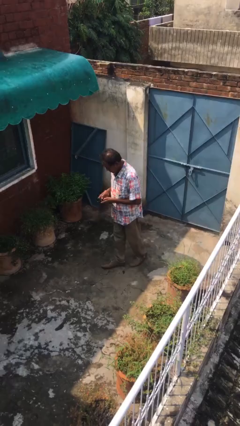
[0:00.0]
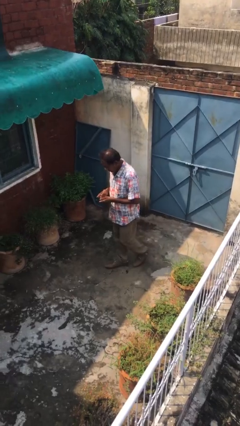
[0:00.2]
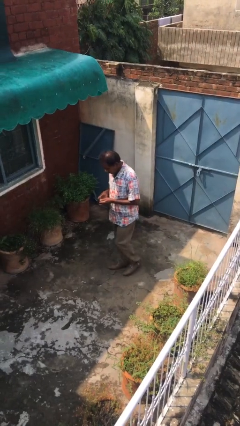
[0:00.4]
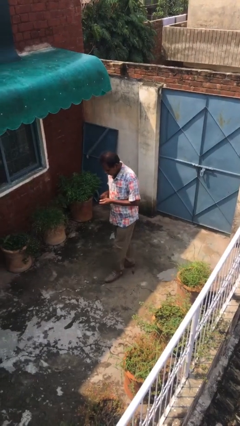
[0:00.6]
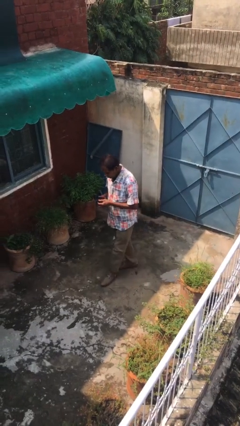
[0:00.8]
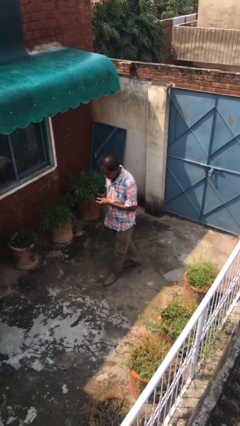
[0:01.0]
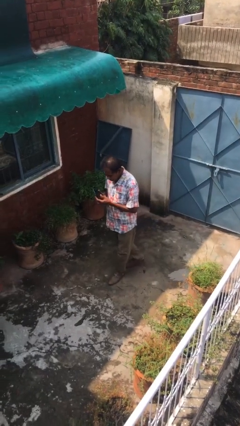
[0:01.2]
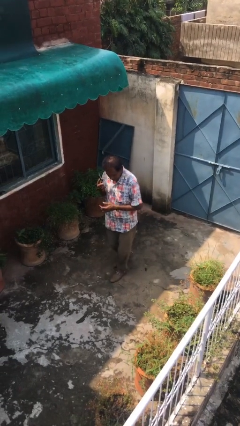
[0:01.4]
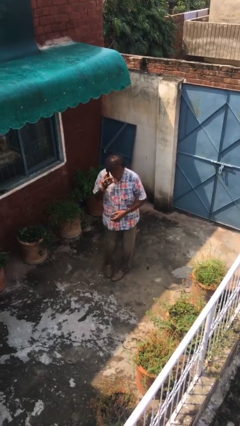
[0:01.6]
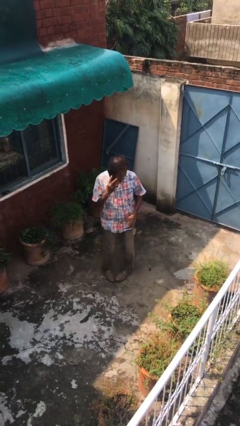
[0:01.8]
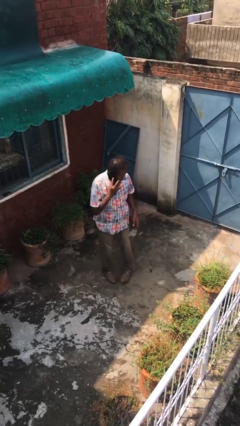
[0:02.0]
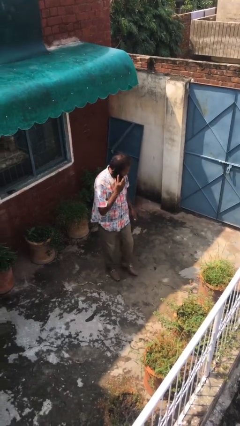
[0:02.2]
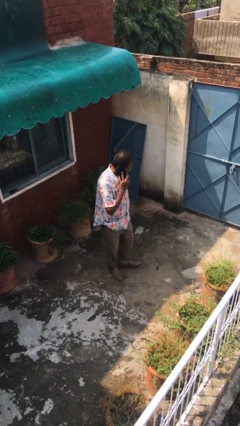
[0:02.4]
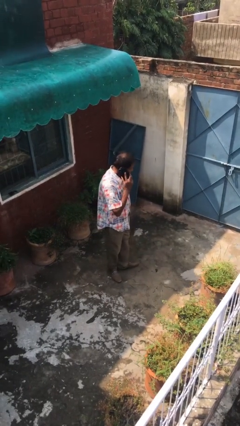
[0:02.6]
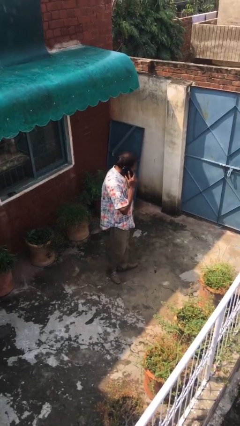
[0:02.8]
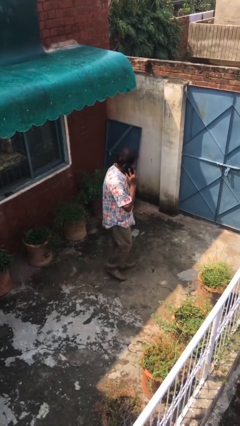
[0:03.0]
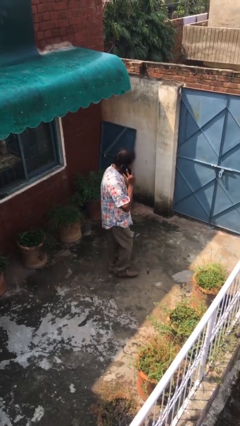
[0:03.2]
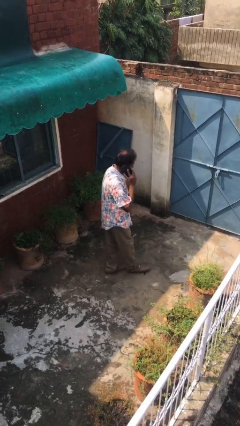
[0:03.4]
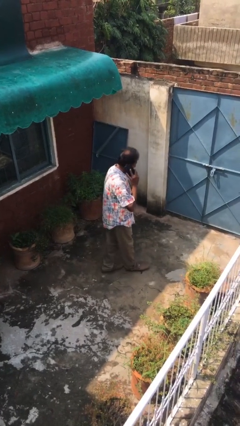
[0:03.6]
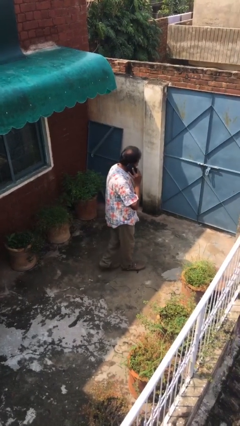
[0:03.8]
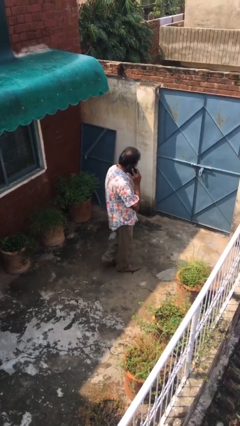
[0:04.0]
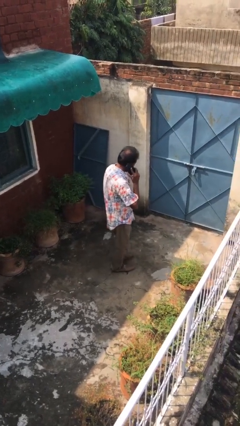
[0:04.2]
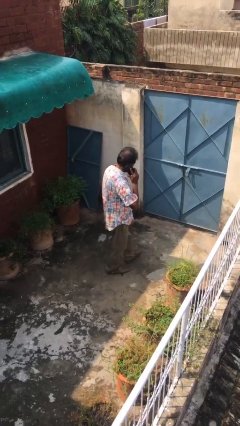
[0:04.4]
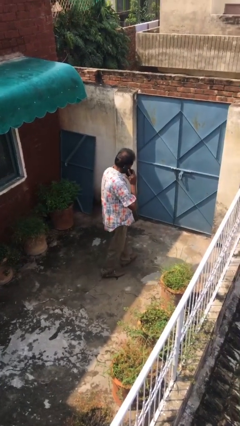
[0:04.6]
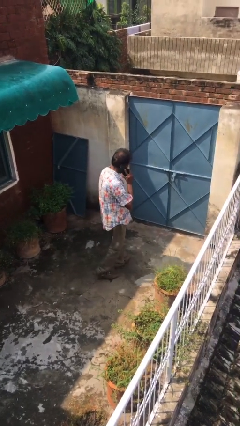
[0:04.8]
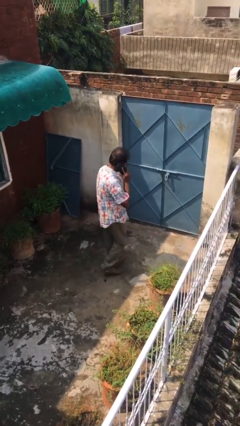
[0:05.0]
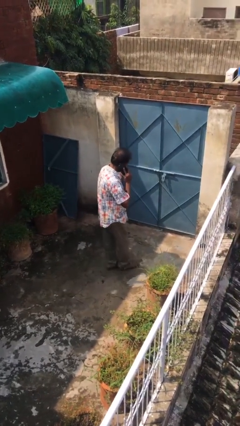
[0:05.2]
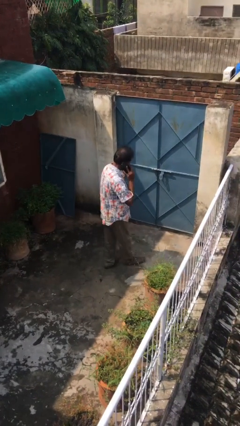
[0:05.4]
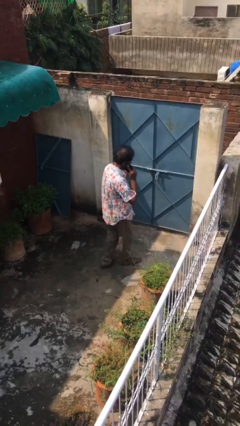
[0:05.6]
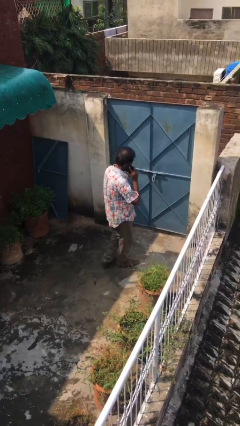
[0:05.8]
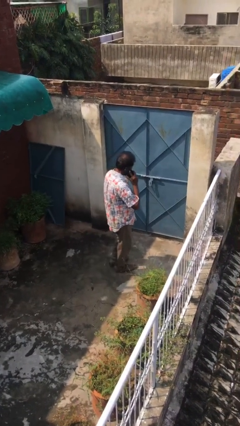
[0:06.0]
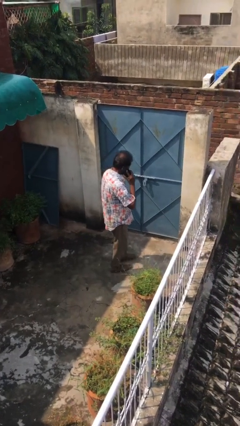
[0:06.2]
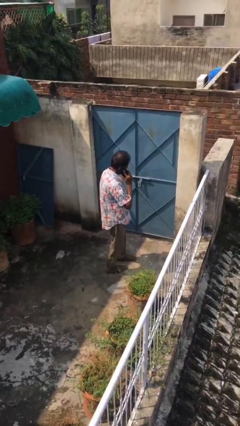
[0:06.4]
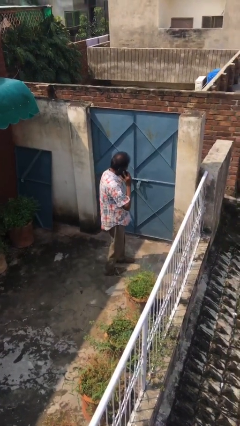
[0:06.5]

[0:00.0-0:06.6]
person talks on phone

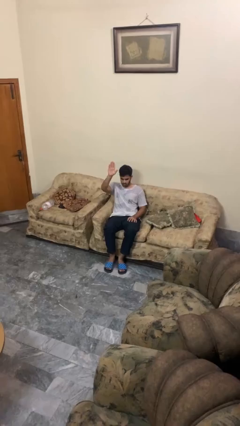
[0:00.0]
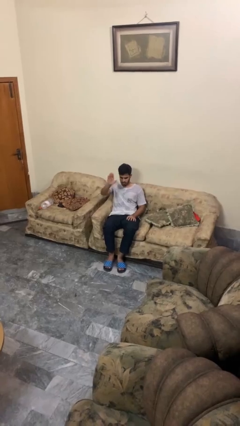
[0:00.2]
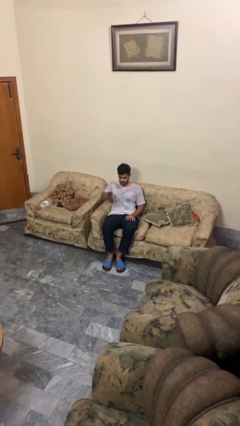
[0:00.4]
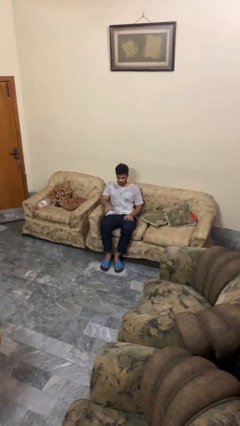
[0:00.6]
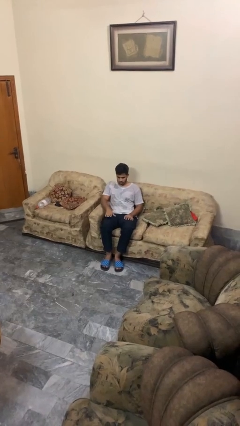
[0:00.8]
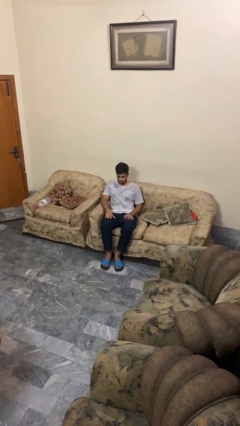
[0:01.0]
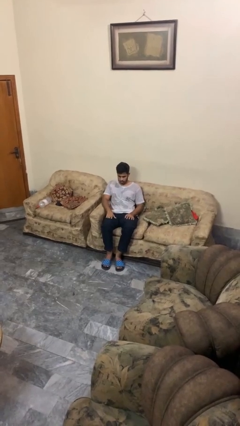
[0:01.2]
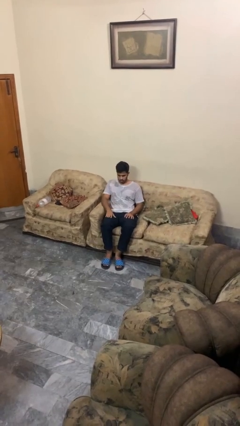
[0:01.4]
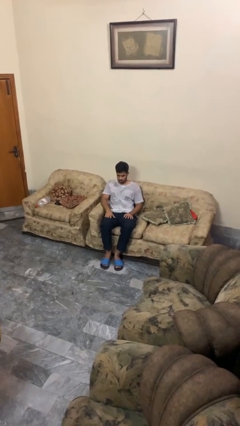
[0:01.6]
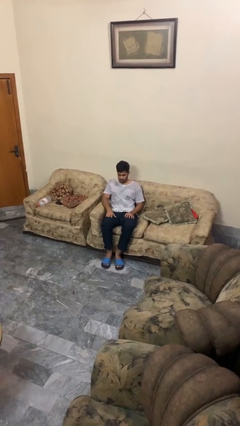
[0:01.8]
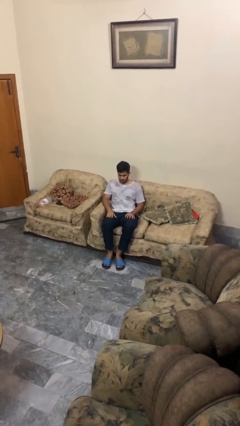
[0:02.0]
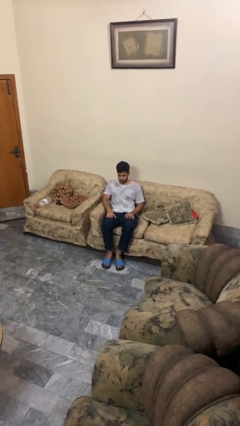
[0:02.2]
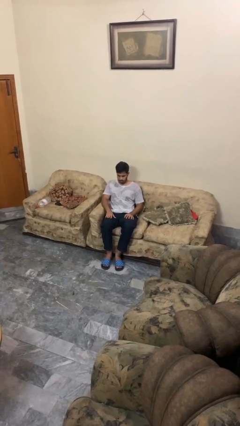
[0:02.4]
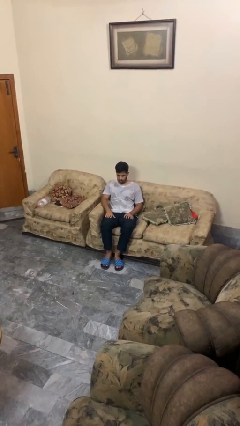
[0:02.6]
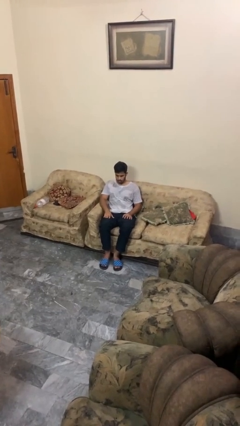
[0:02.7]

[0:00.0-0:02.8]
person gestures lower hand

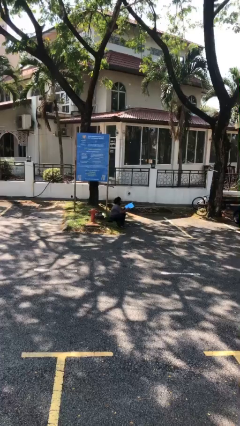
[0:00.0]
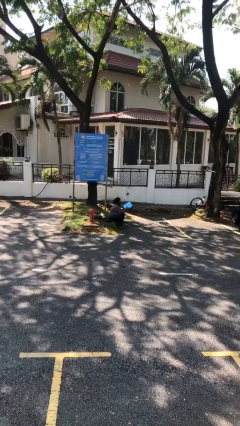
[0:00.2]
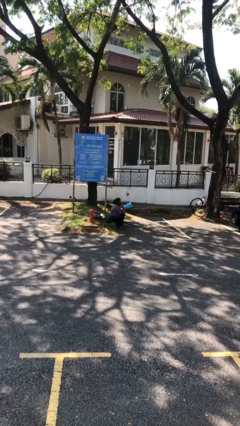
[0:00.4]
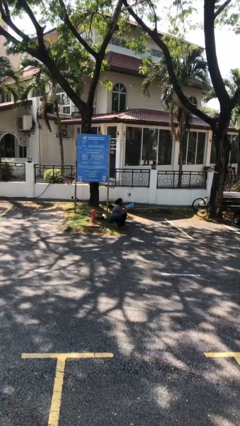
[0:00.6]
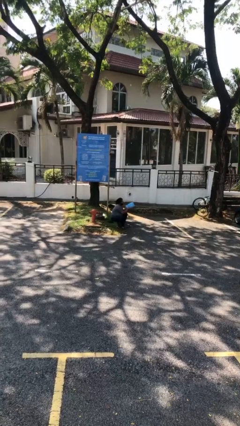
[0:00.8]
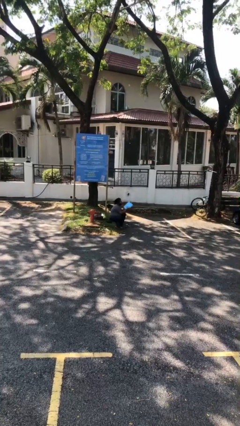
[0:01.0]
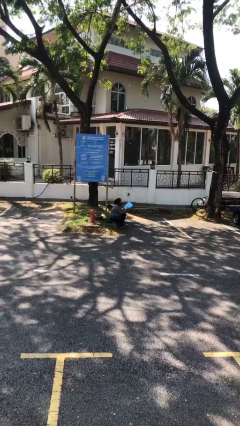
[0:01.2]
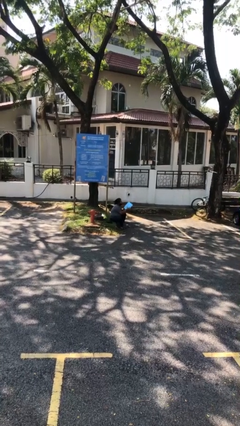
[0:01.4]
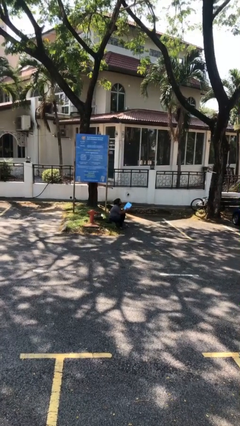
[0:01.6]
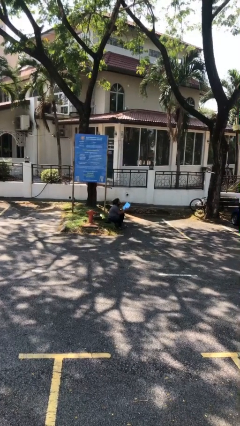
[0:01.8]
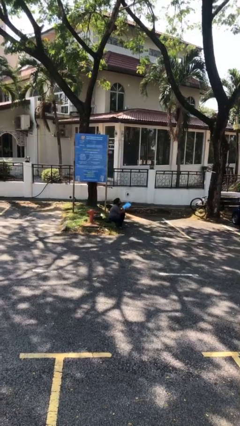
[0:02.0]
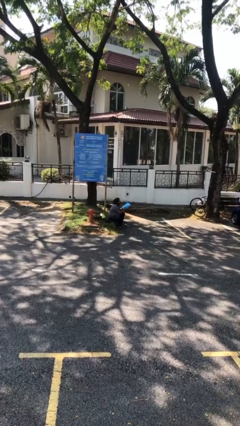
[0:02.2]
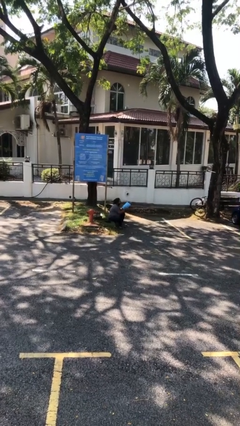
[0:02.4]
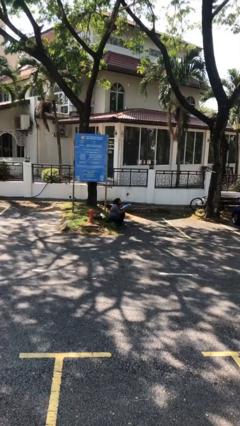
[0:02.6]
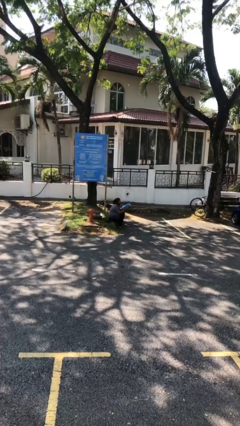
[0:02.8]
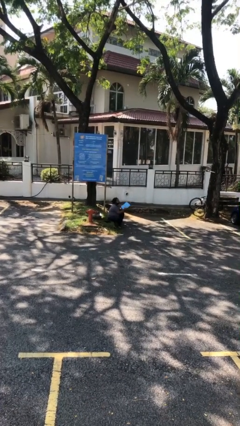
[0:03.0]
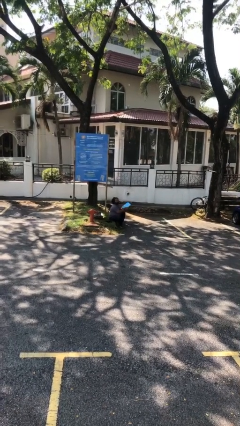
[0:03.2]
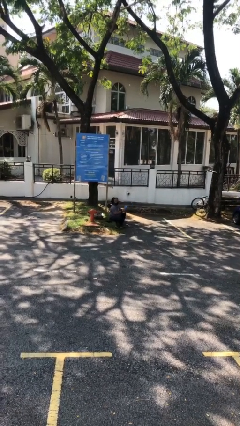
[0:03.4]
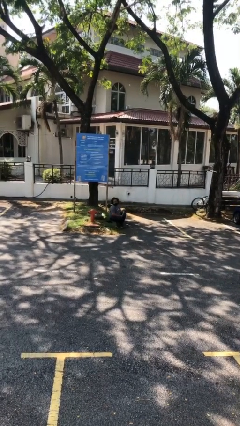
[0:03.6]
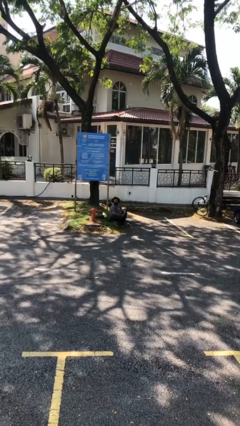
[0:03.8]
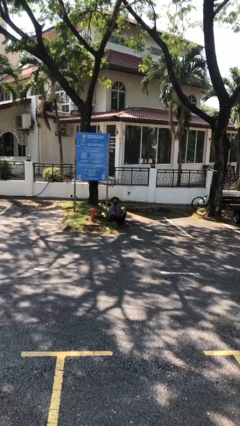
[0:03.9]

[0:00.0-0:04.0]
person reads document

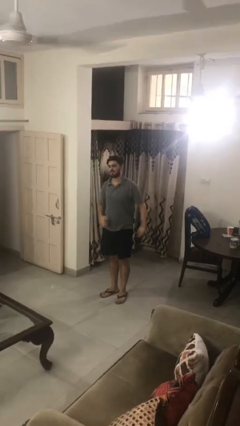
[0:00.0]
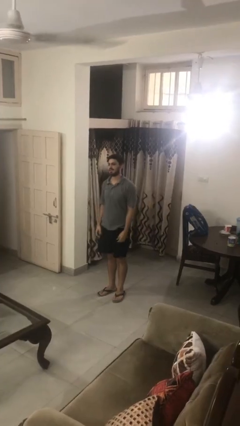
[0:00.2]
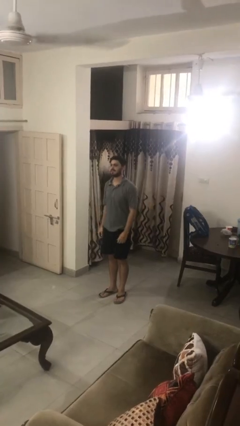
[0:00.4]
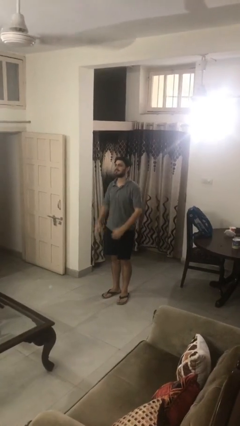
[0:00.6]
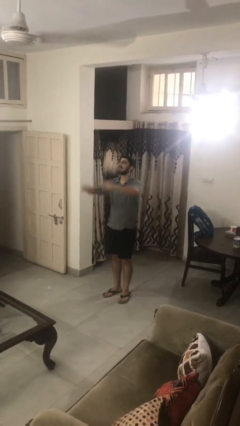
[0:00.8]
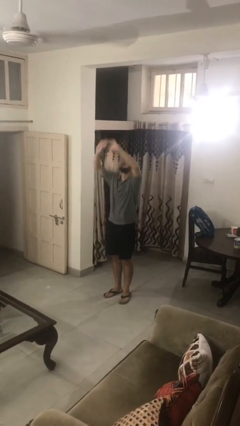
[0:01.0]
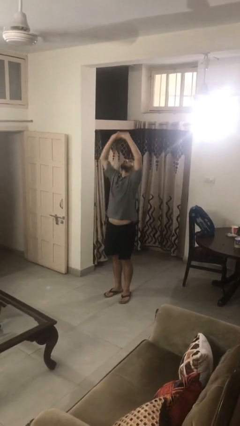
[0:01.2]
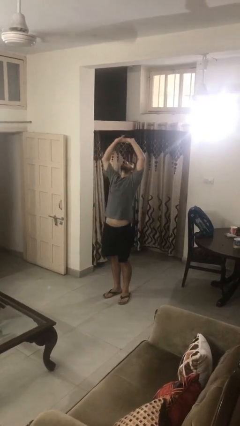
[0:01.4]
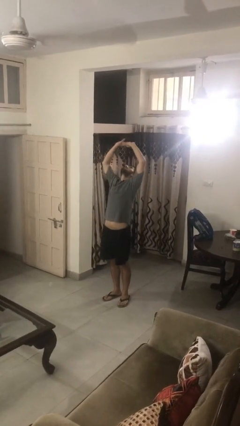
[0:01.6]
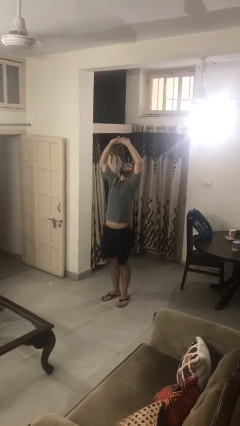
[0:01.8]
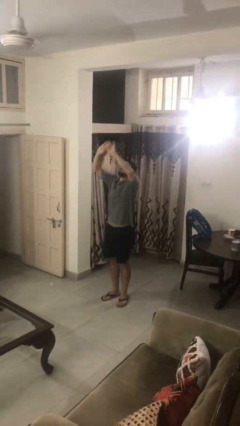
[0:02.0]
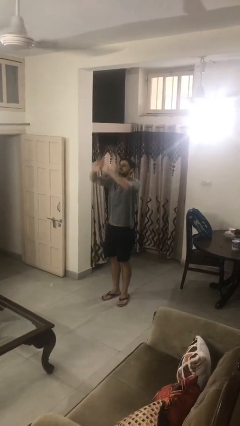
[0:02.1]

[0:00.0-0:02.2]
person stretches arms over head

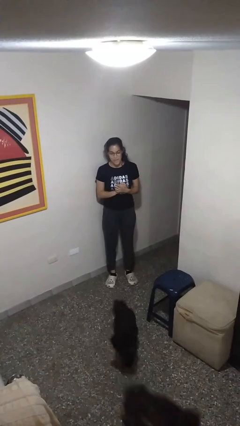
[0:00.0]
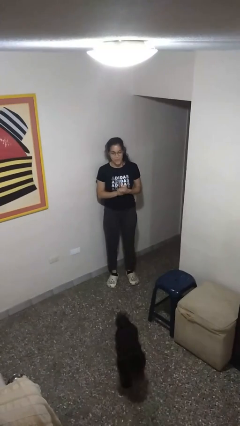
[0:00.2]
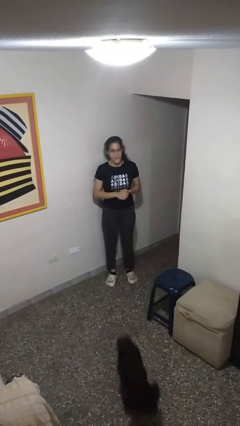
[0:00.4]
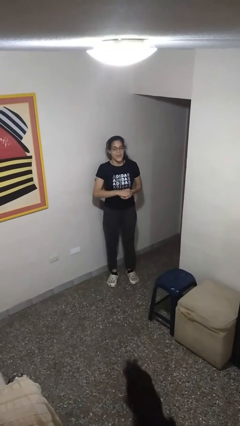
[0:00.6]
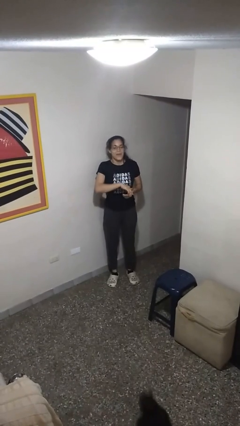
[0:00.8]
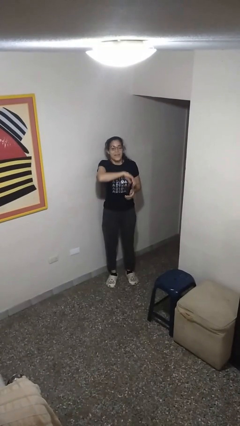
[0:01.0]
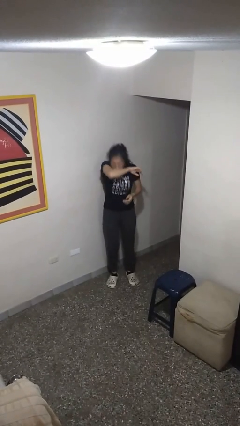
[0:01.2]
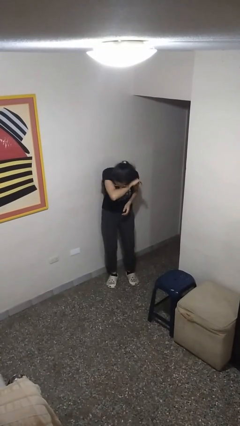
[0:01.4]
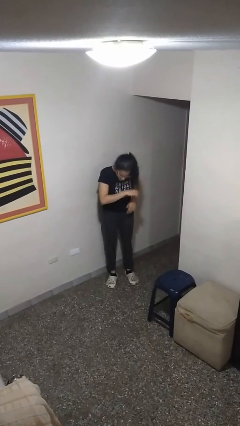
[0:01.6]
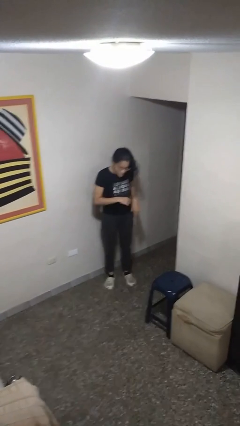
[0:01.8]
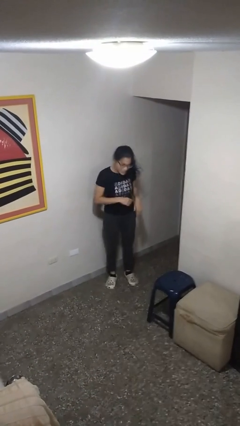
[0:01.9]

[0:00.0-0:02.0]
person sneezes into arm
